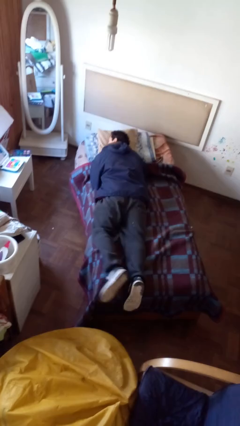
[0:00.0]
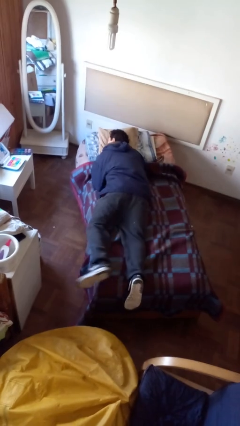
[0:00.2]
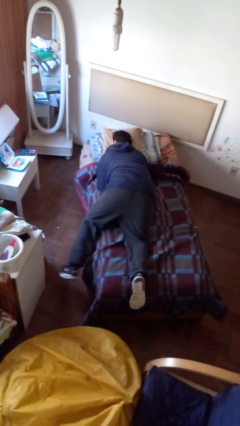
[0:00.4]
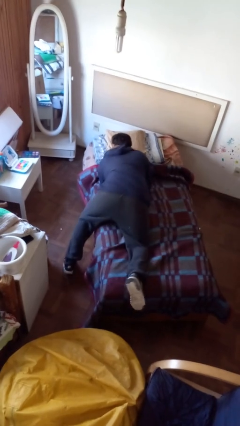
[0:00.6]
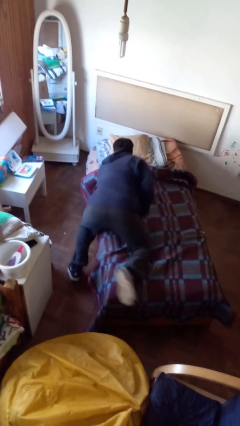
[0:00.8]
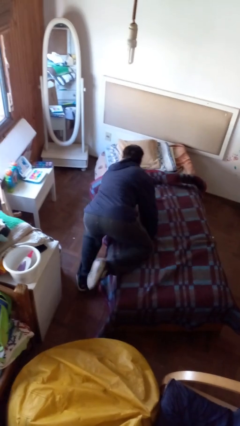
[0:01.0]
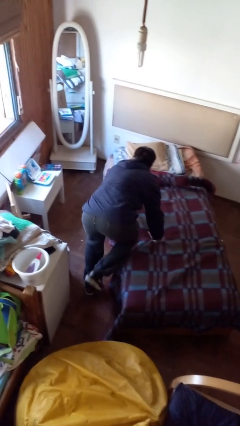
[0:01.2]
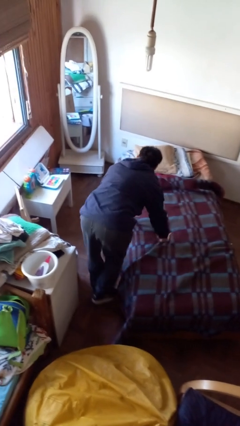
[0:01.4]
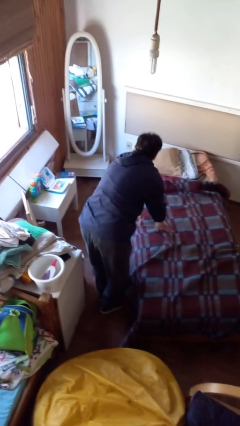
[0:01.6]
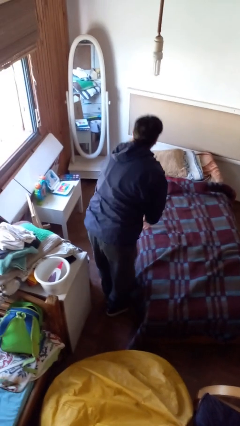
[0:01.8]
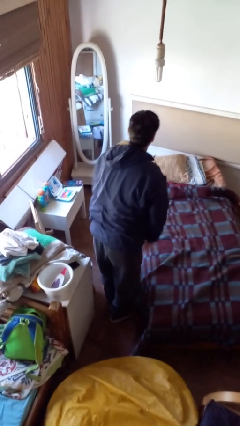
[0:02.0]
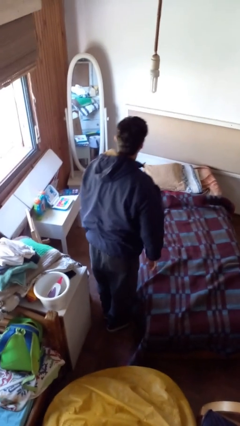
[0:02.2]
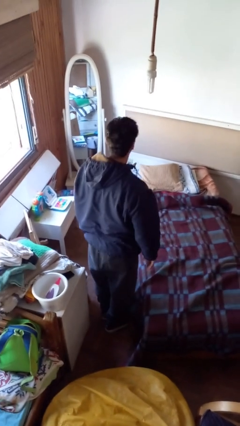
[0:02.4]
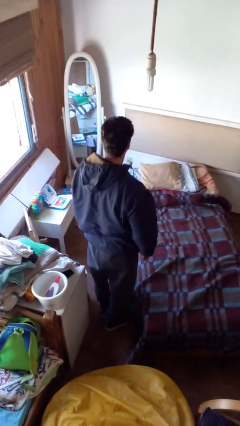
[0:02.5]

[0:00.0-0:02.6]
person stands up

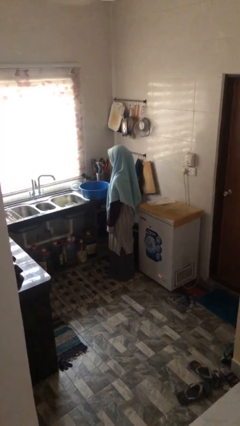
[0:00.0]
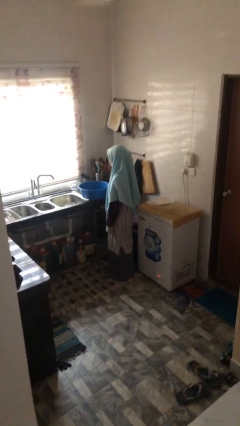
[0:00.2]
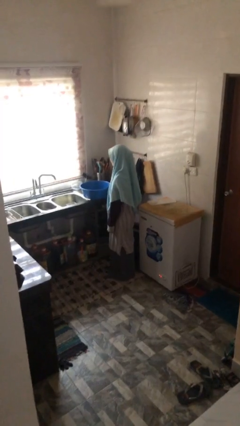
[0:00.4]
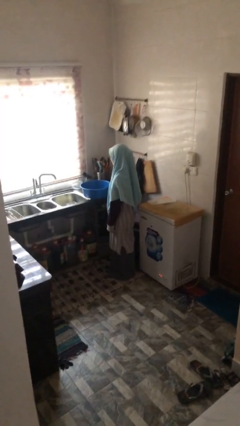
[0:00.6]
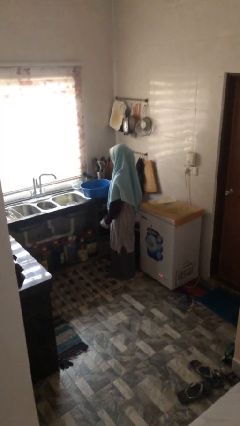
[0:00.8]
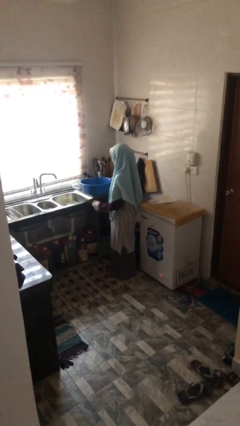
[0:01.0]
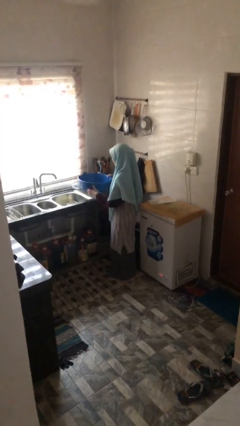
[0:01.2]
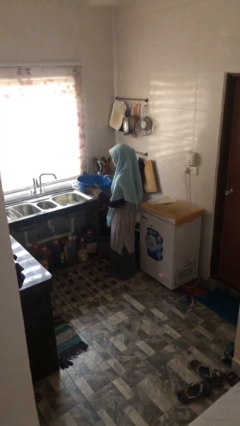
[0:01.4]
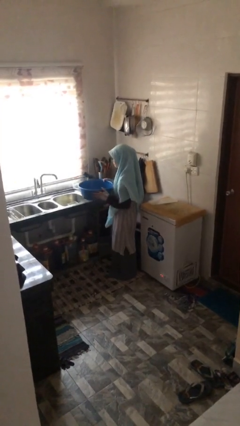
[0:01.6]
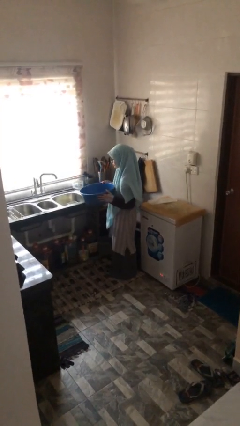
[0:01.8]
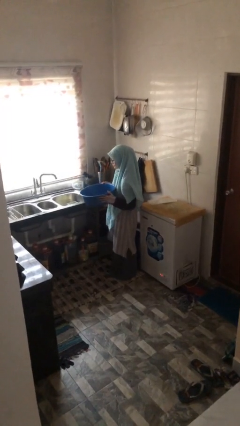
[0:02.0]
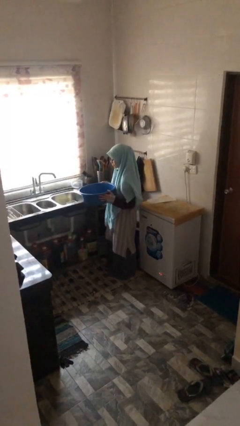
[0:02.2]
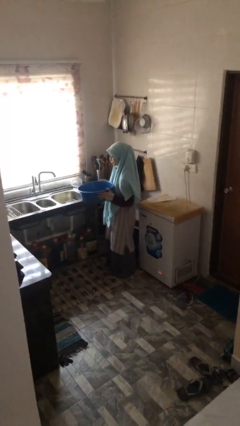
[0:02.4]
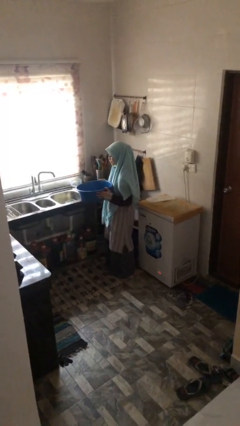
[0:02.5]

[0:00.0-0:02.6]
person picks up object from countertop

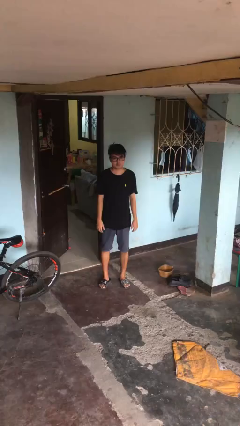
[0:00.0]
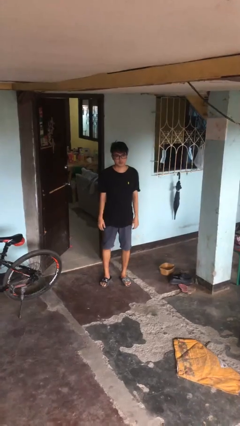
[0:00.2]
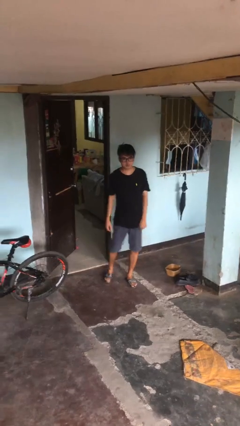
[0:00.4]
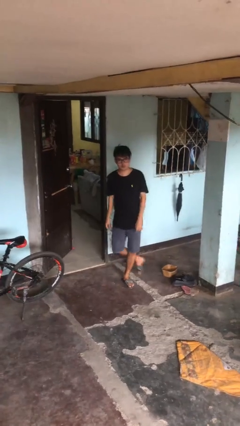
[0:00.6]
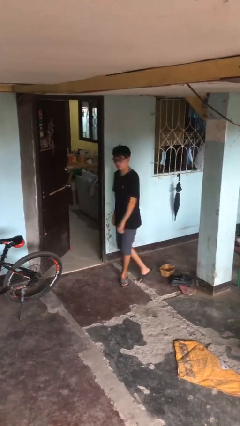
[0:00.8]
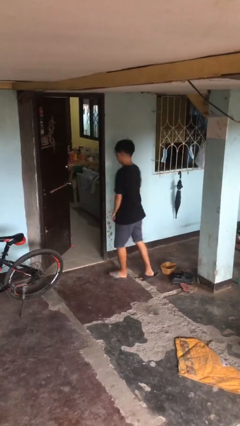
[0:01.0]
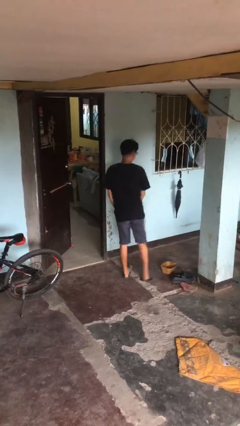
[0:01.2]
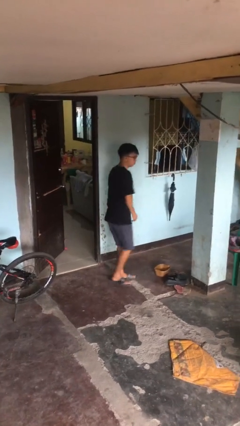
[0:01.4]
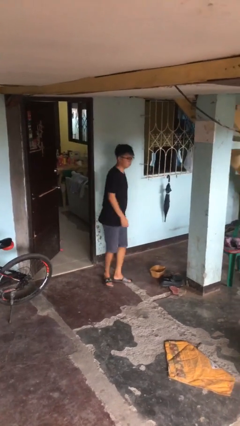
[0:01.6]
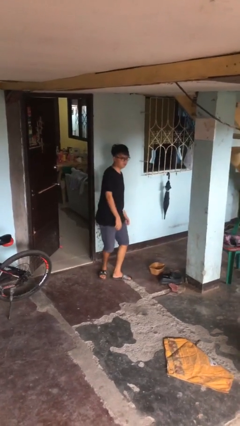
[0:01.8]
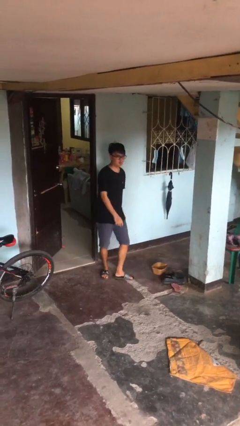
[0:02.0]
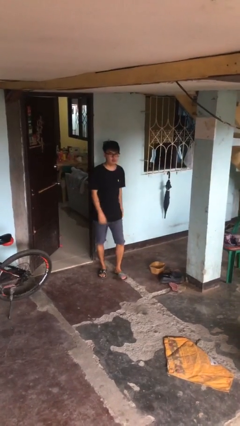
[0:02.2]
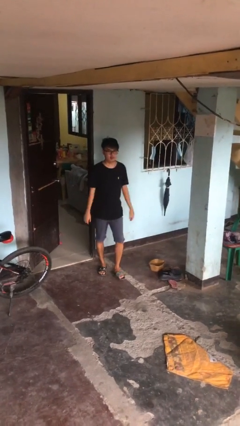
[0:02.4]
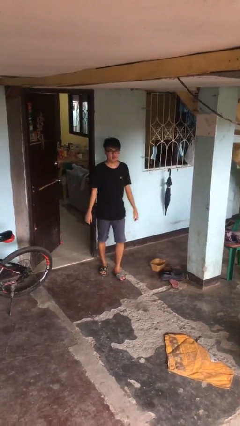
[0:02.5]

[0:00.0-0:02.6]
person twirls

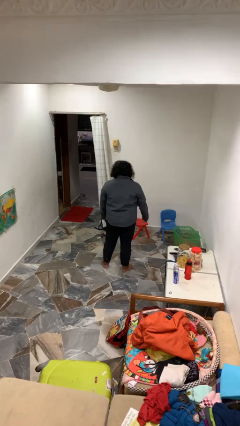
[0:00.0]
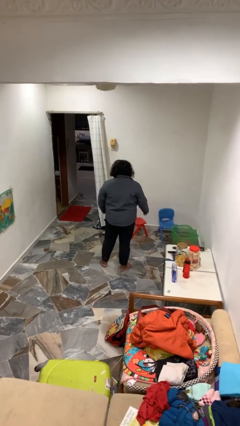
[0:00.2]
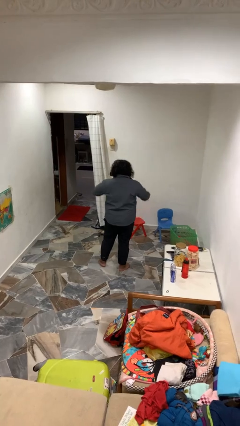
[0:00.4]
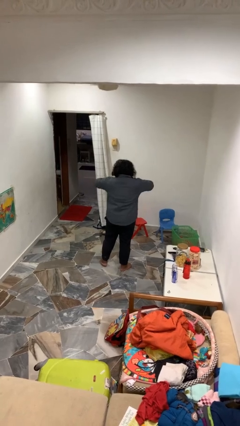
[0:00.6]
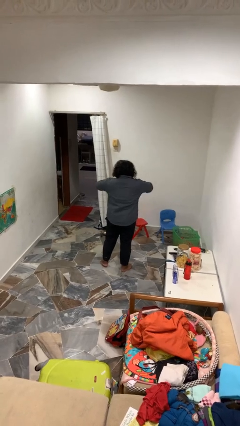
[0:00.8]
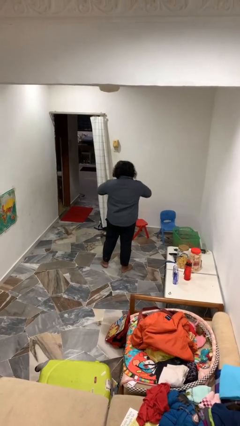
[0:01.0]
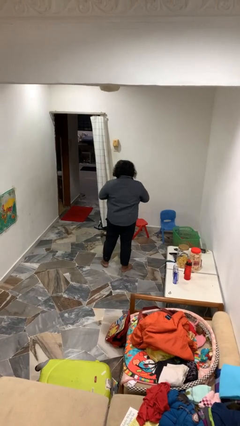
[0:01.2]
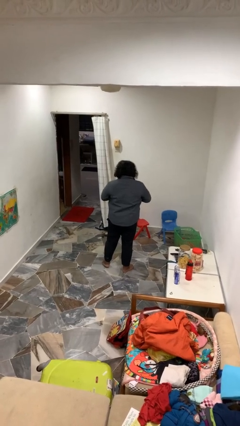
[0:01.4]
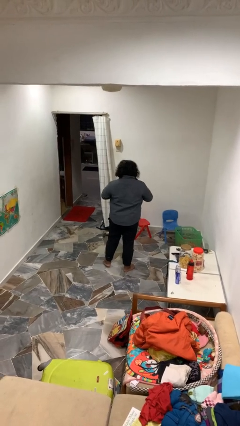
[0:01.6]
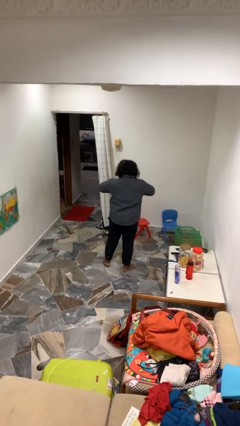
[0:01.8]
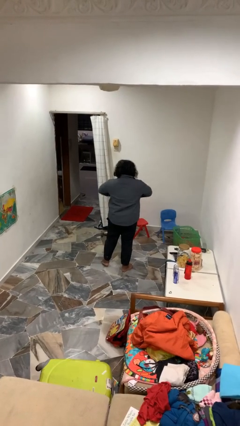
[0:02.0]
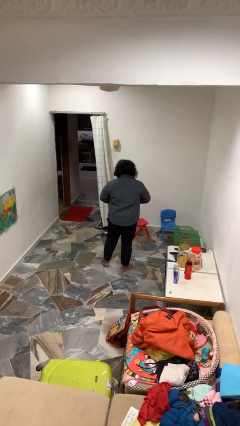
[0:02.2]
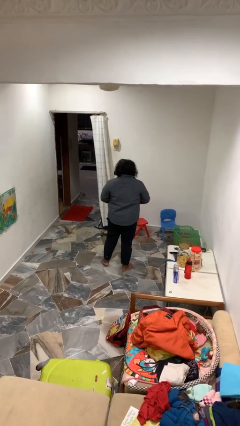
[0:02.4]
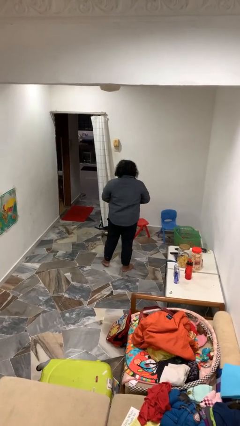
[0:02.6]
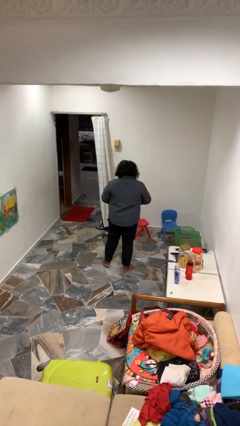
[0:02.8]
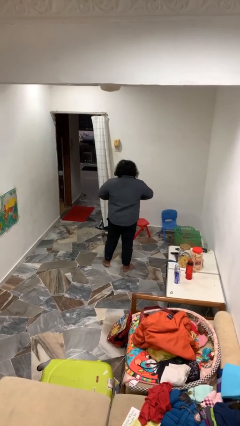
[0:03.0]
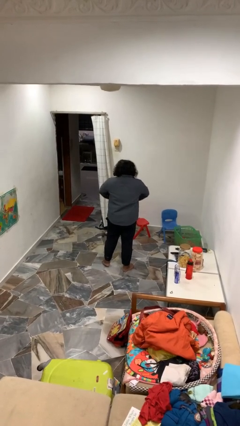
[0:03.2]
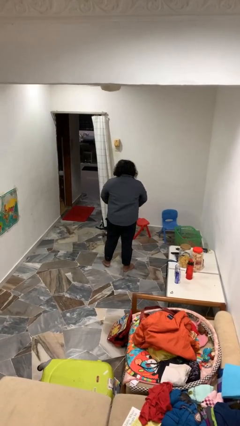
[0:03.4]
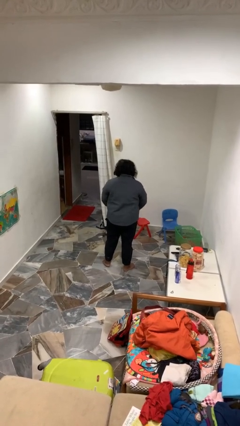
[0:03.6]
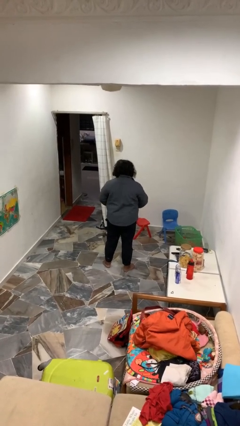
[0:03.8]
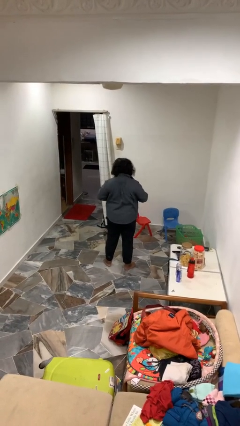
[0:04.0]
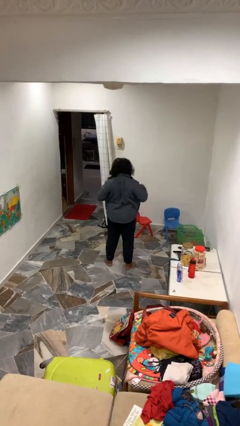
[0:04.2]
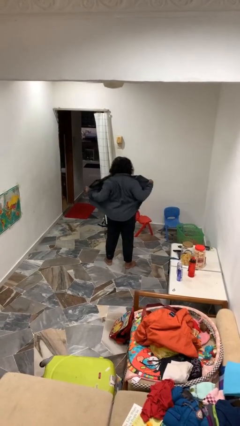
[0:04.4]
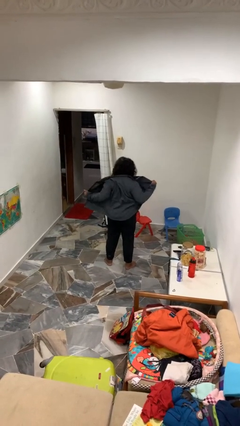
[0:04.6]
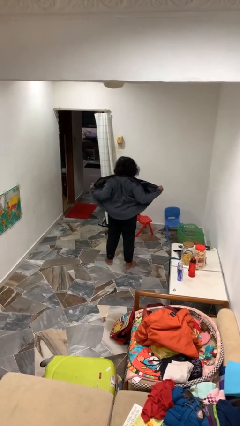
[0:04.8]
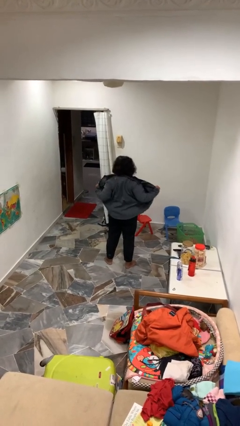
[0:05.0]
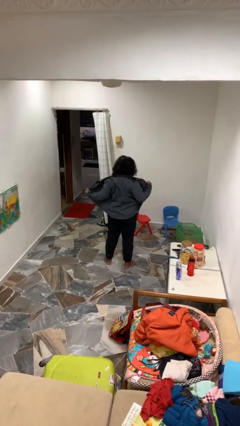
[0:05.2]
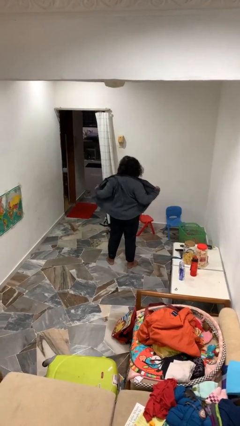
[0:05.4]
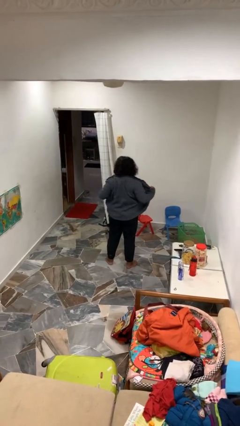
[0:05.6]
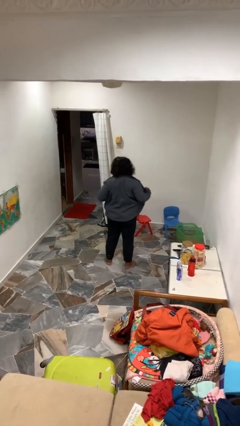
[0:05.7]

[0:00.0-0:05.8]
person unbuttons shirt

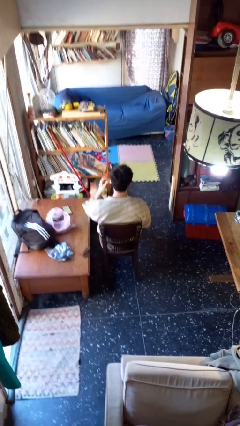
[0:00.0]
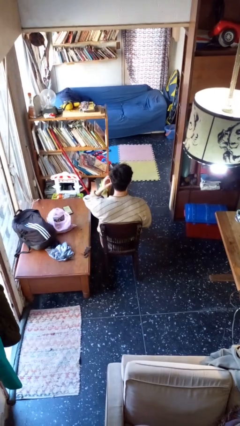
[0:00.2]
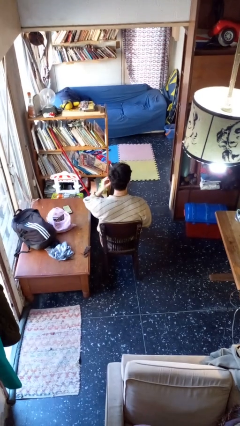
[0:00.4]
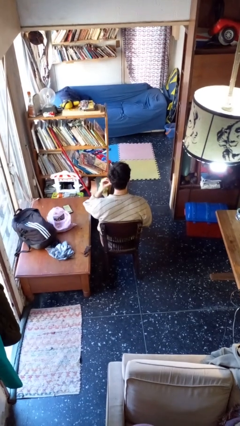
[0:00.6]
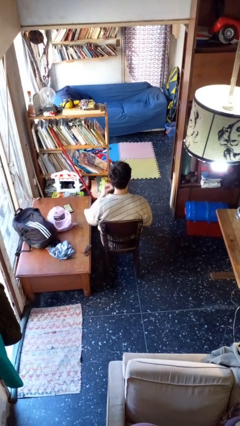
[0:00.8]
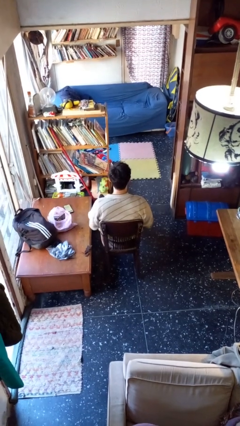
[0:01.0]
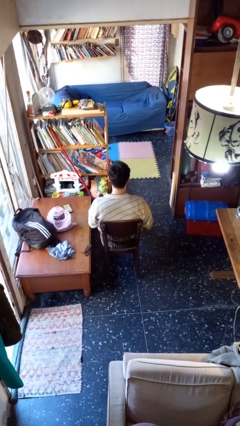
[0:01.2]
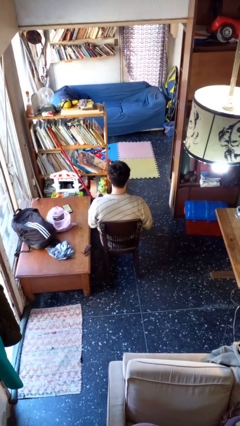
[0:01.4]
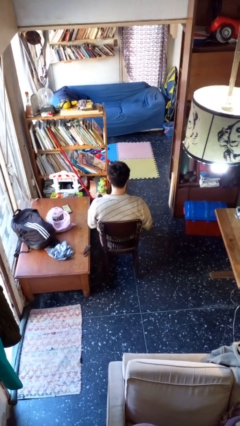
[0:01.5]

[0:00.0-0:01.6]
person takes off earrings

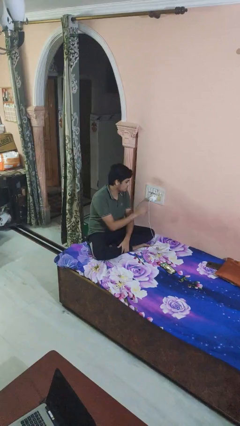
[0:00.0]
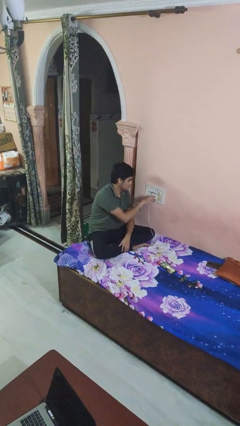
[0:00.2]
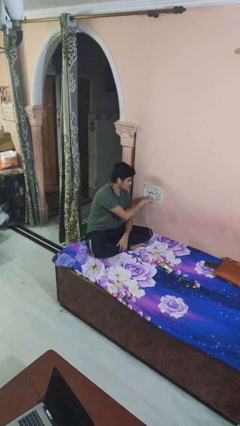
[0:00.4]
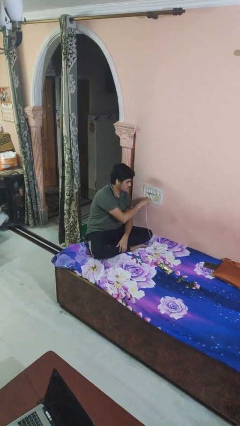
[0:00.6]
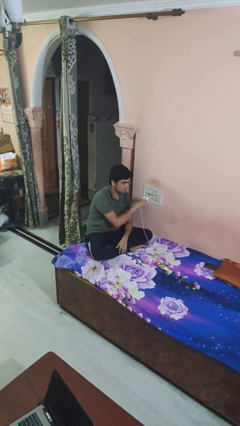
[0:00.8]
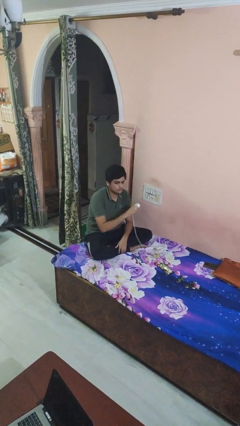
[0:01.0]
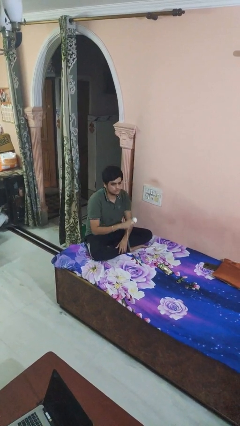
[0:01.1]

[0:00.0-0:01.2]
person unplugs from electrical socket

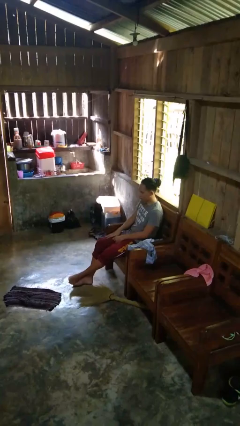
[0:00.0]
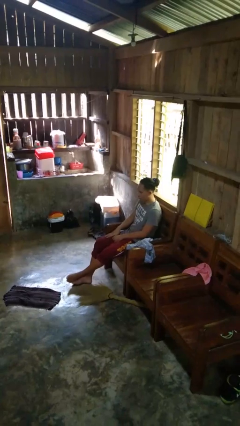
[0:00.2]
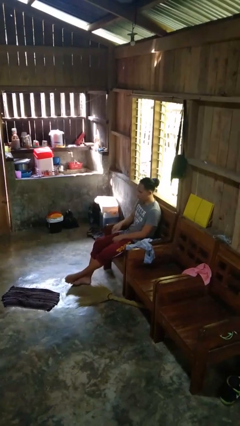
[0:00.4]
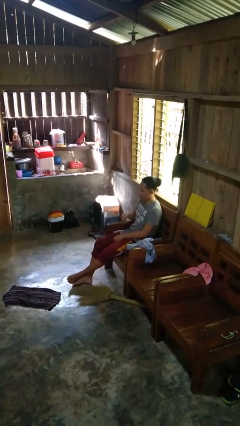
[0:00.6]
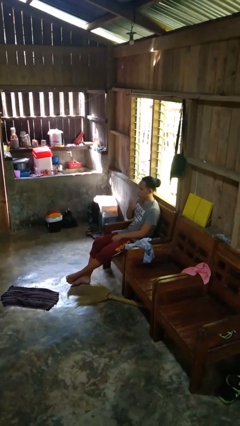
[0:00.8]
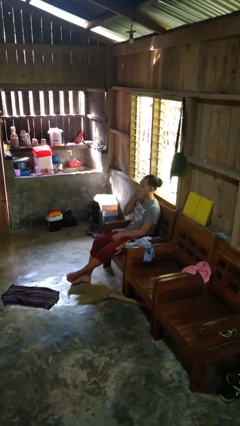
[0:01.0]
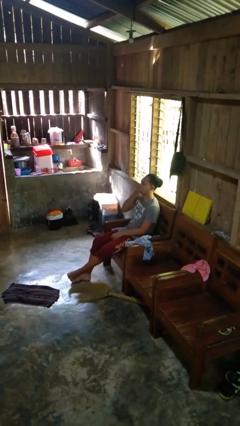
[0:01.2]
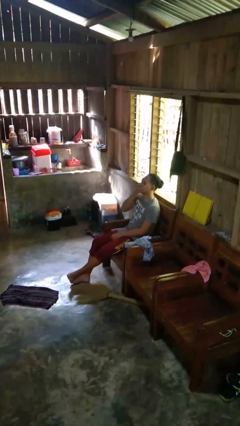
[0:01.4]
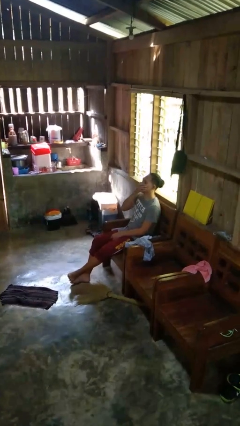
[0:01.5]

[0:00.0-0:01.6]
person yawns
